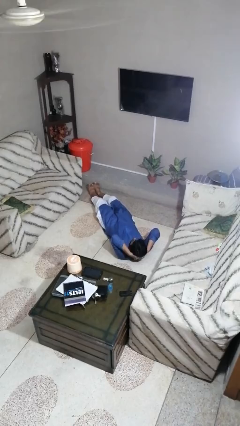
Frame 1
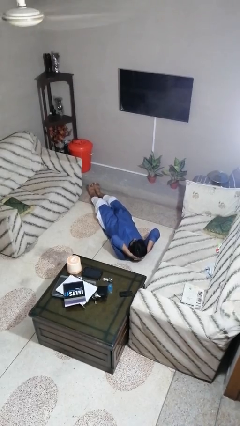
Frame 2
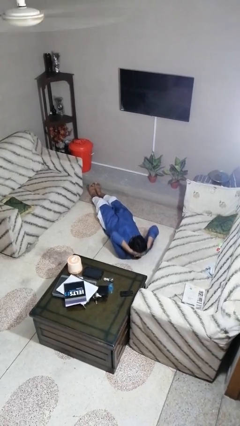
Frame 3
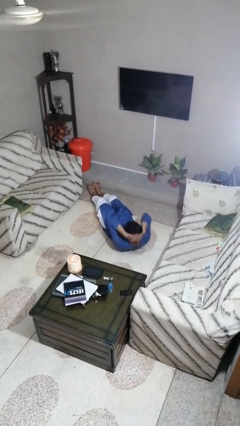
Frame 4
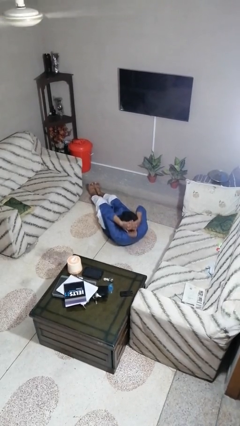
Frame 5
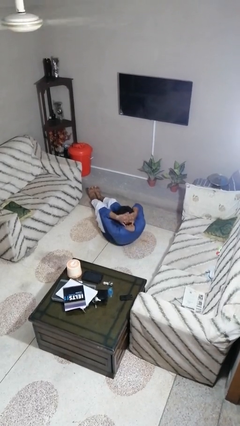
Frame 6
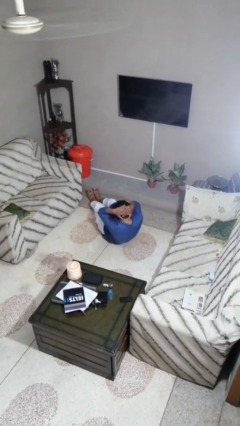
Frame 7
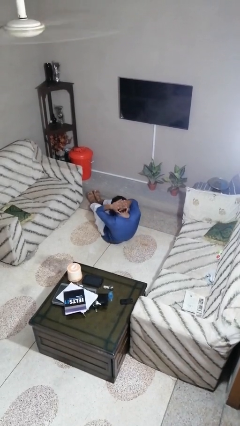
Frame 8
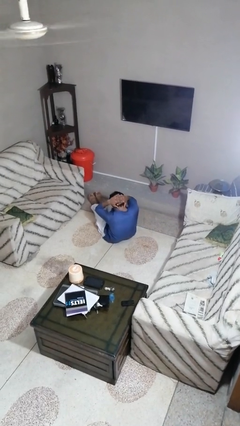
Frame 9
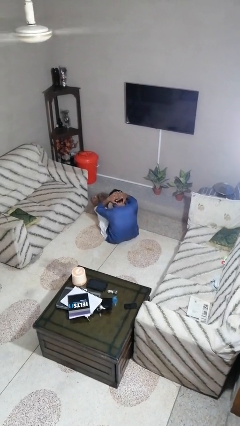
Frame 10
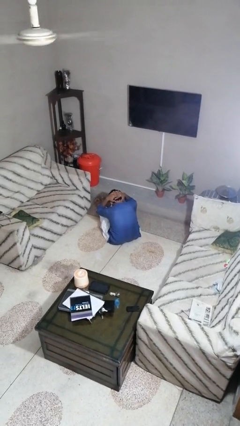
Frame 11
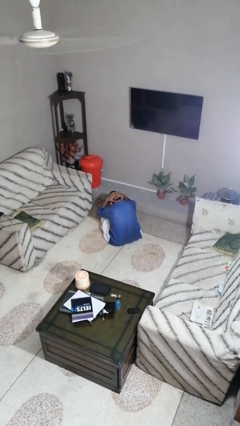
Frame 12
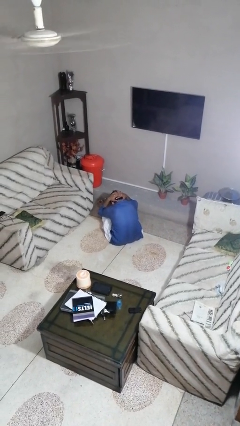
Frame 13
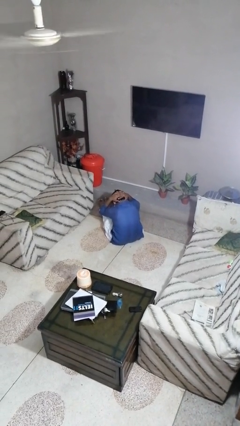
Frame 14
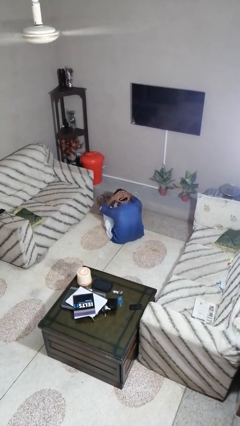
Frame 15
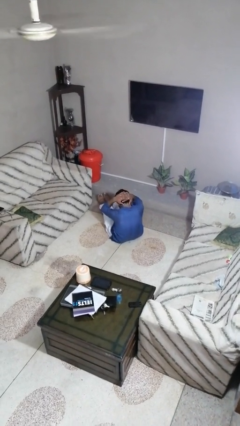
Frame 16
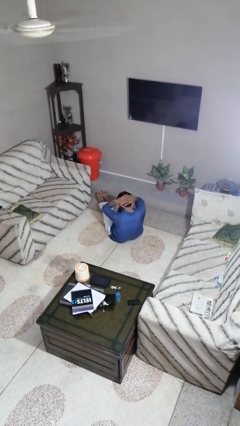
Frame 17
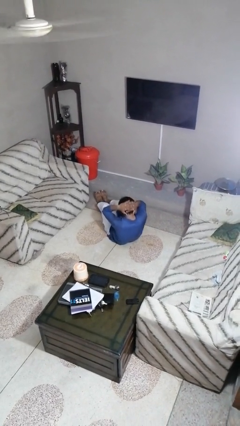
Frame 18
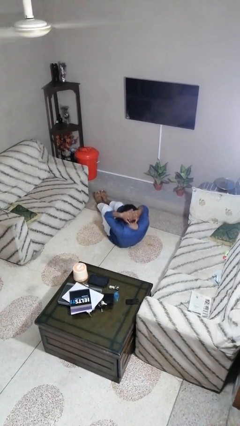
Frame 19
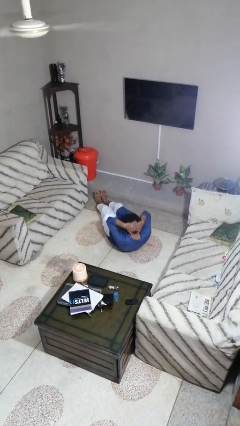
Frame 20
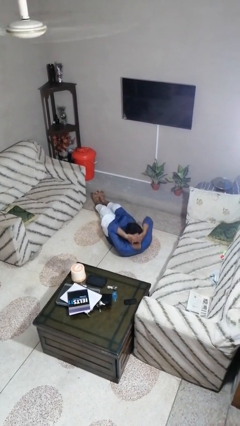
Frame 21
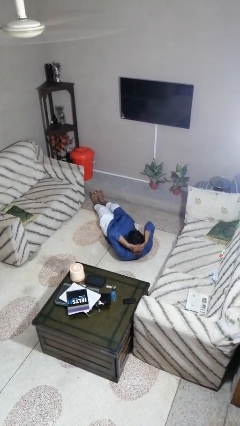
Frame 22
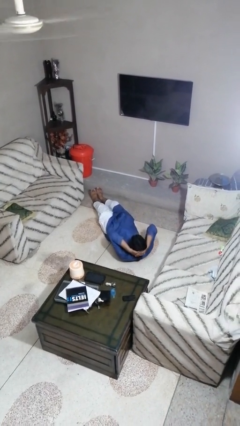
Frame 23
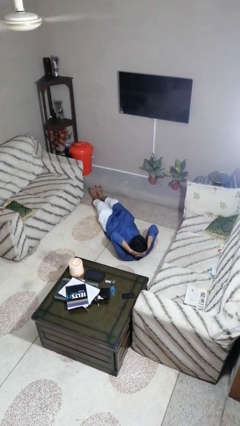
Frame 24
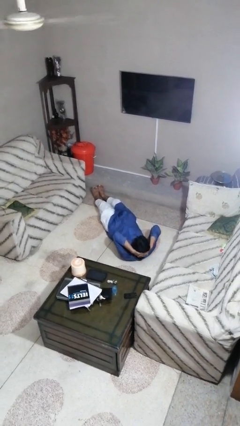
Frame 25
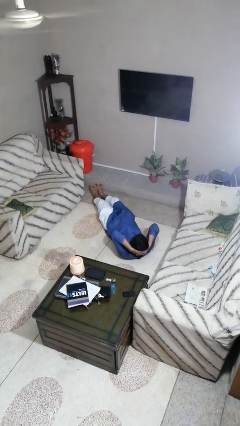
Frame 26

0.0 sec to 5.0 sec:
person exercises with situp

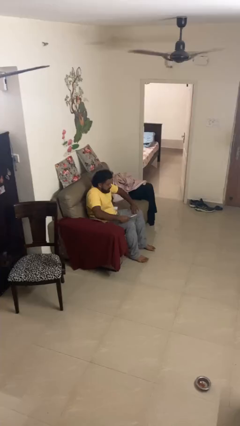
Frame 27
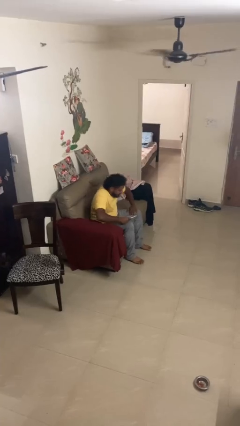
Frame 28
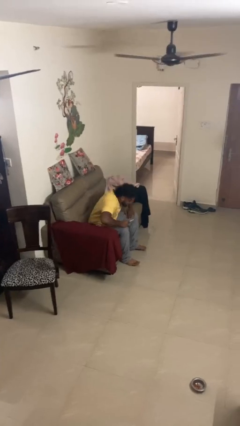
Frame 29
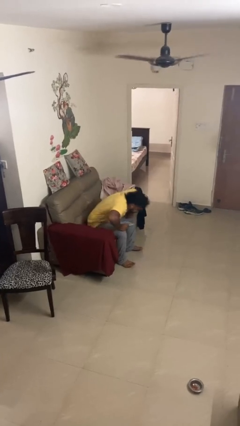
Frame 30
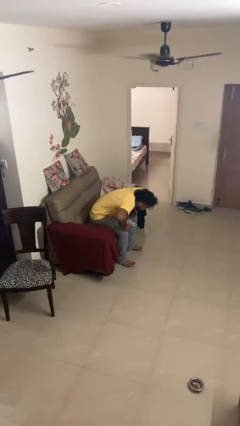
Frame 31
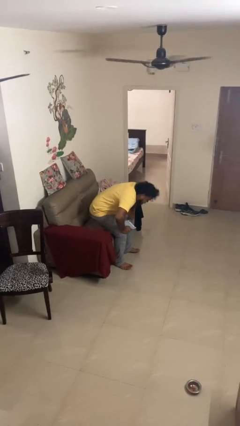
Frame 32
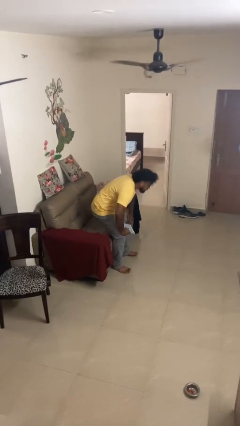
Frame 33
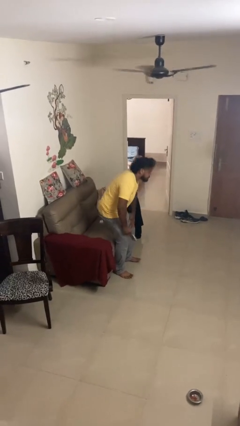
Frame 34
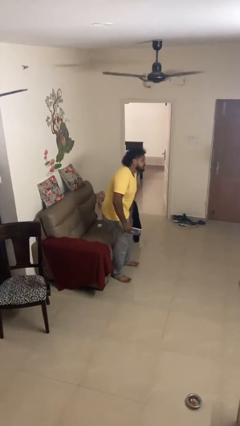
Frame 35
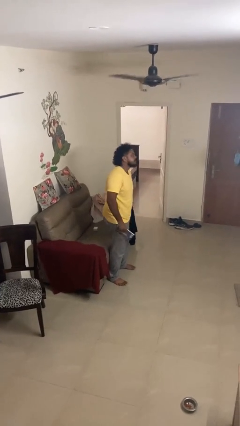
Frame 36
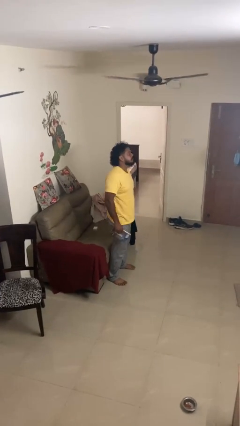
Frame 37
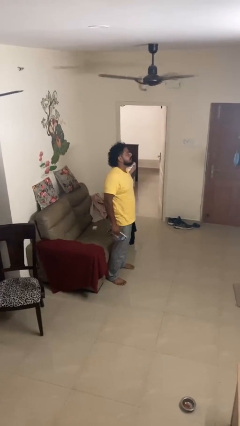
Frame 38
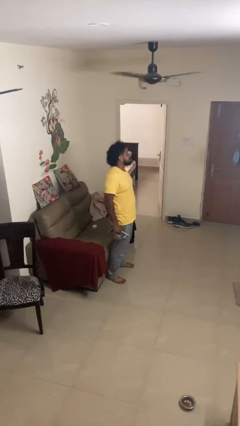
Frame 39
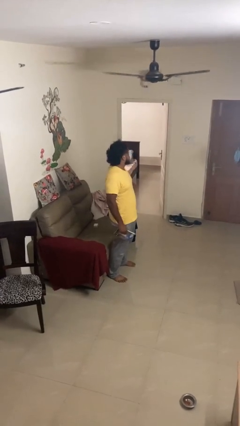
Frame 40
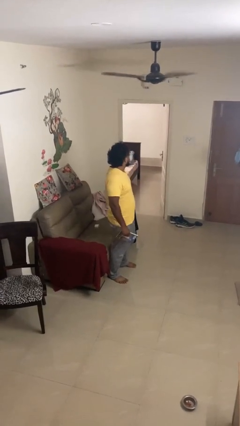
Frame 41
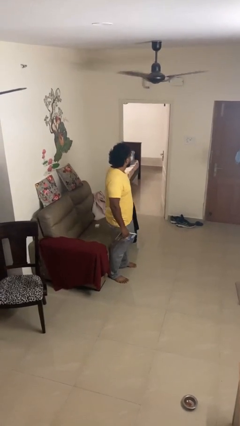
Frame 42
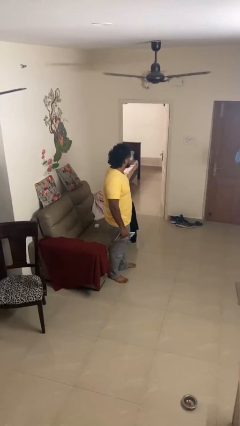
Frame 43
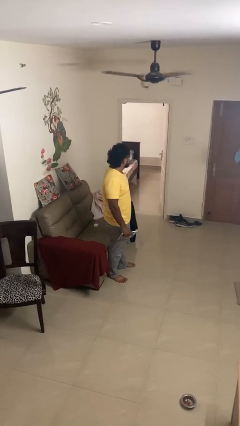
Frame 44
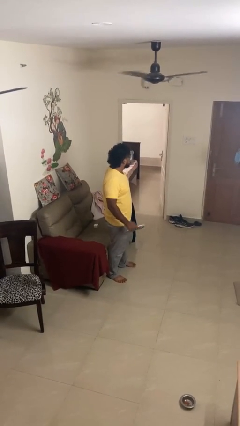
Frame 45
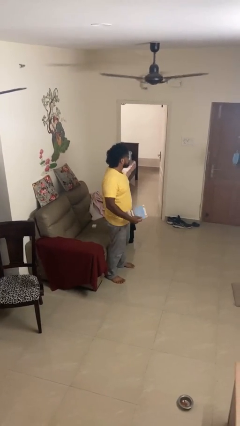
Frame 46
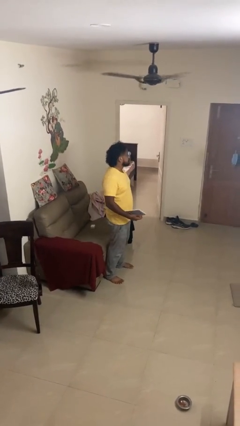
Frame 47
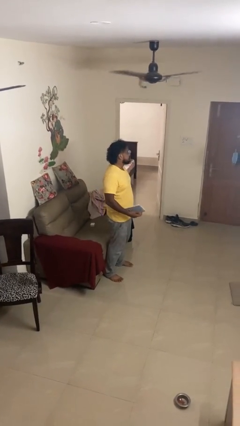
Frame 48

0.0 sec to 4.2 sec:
person stands up

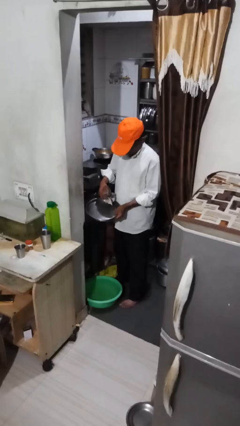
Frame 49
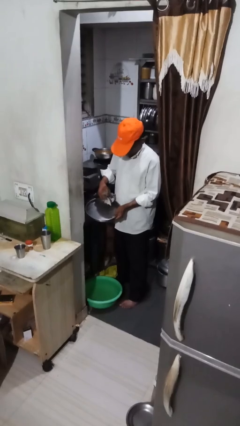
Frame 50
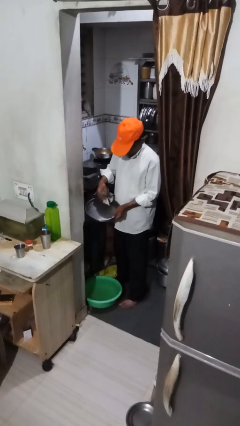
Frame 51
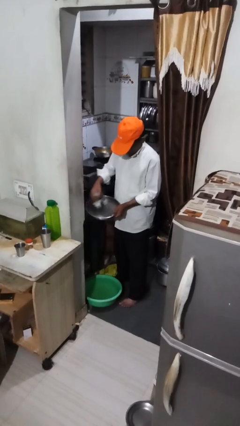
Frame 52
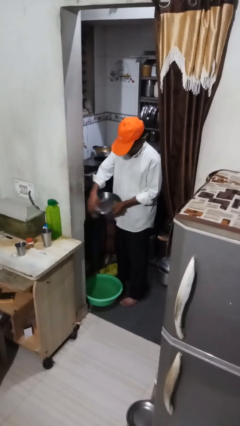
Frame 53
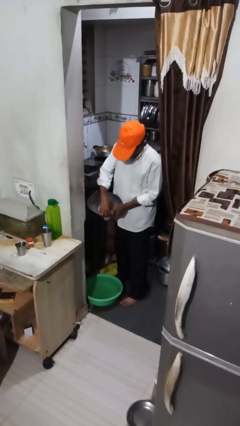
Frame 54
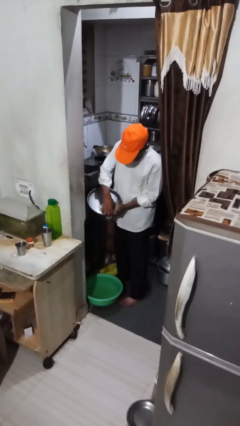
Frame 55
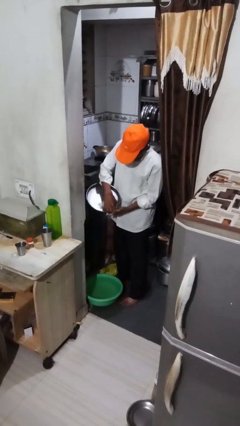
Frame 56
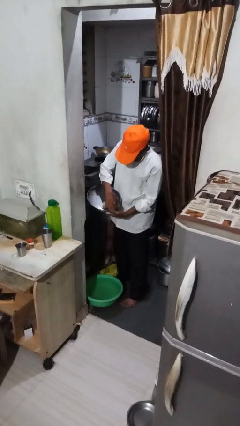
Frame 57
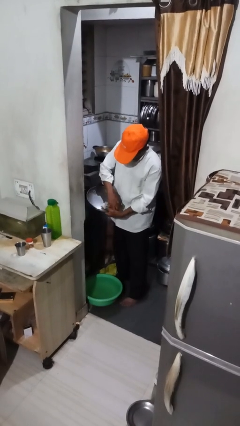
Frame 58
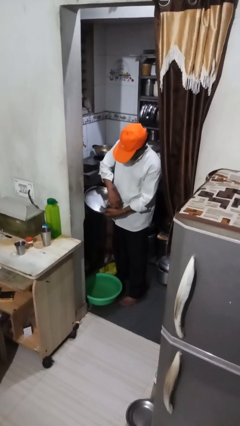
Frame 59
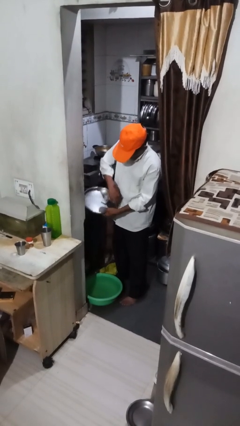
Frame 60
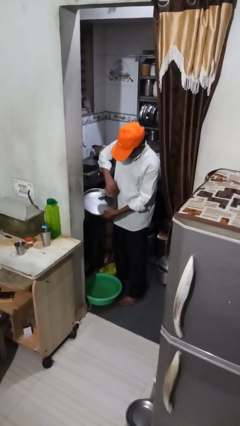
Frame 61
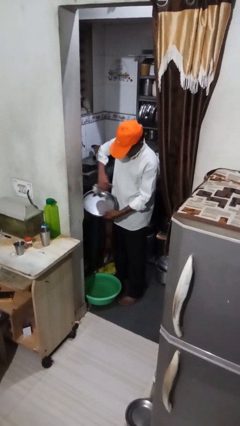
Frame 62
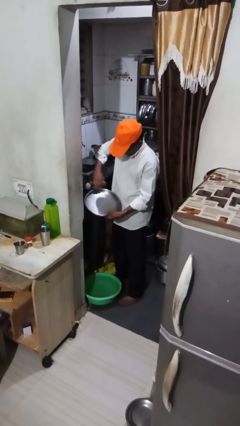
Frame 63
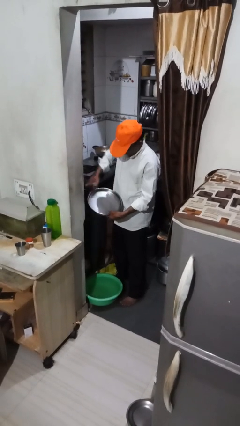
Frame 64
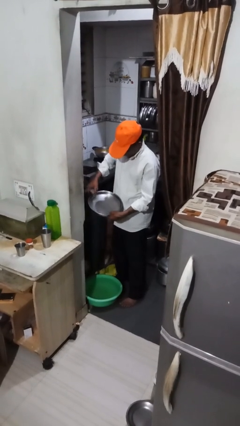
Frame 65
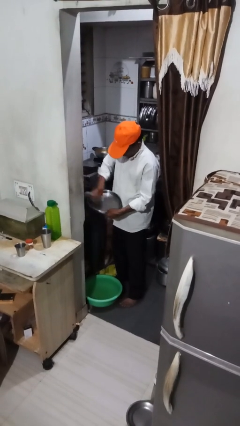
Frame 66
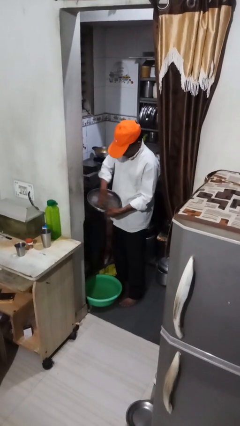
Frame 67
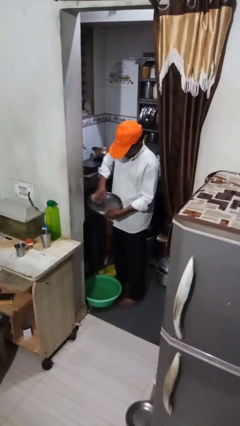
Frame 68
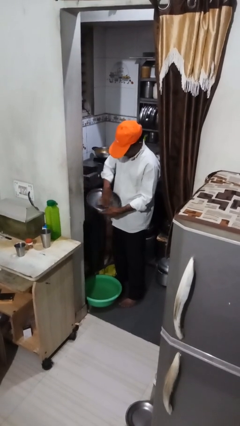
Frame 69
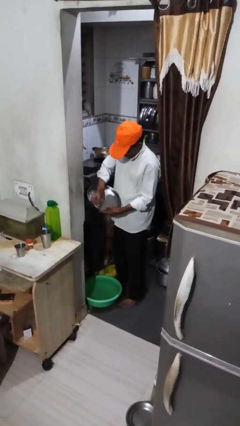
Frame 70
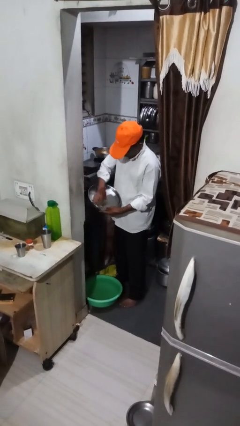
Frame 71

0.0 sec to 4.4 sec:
person dries dish

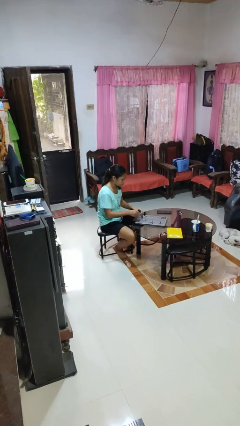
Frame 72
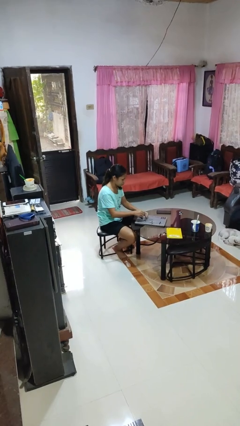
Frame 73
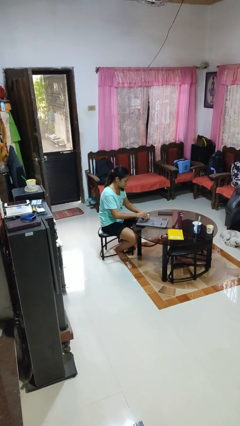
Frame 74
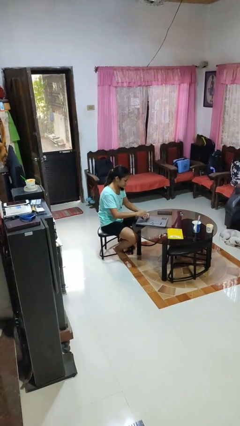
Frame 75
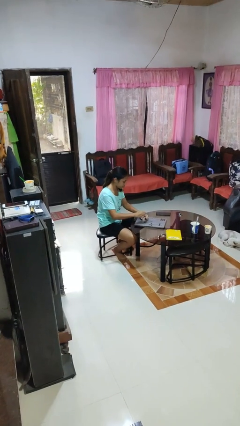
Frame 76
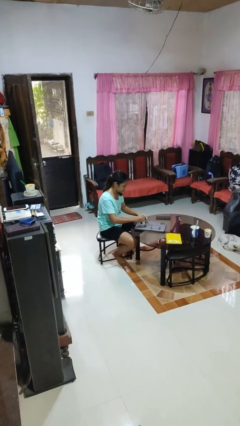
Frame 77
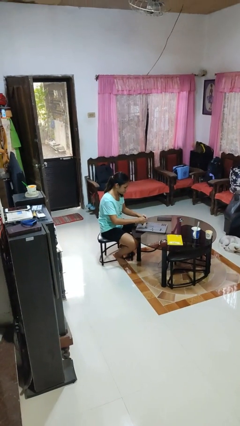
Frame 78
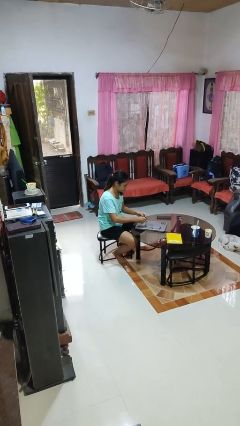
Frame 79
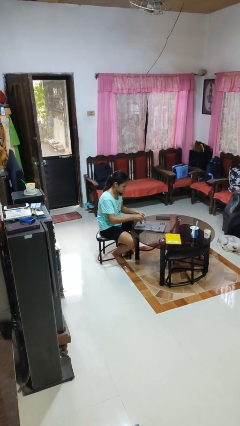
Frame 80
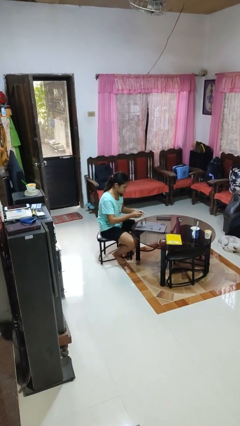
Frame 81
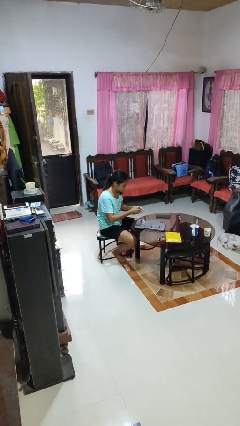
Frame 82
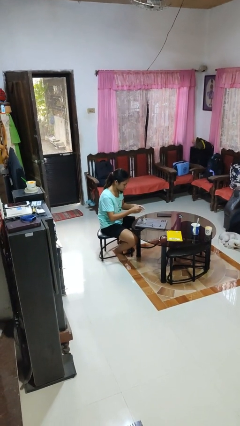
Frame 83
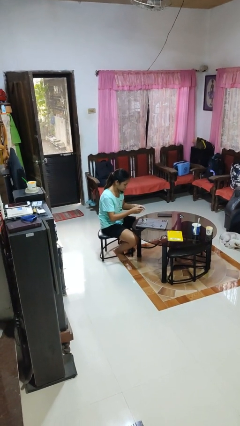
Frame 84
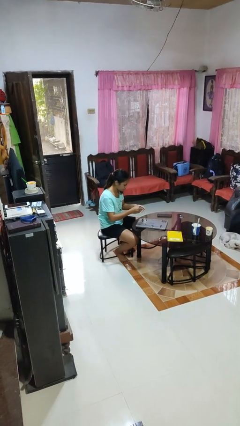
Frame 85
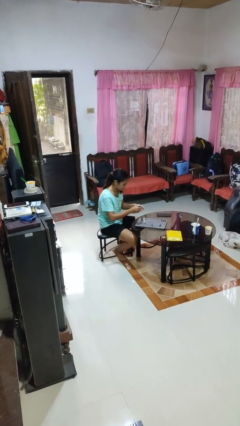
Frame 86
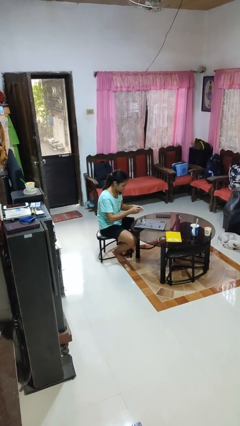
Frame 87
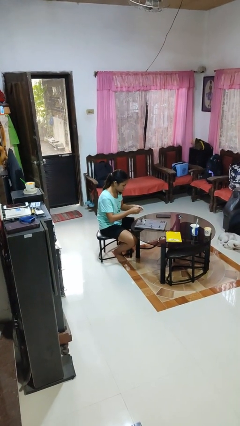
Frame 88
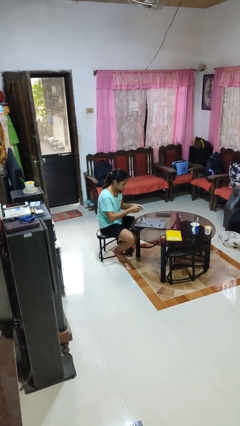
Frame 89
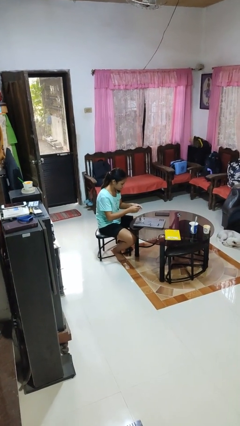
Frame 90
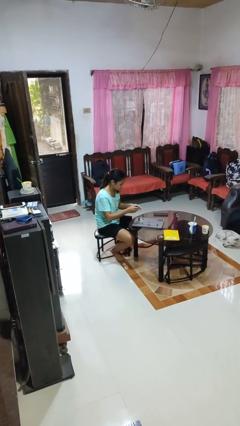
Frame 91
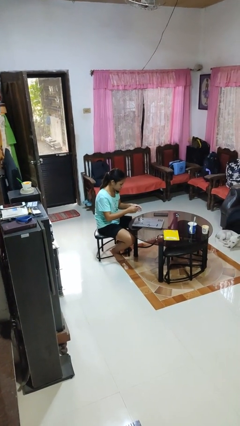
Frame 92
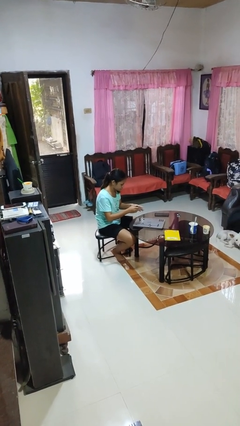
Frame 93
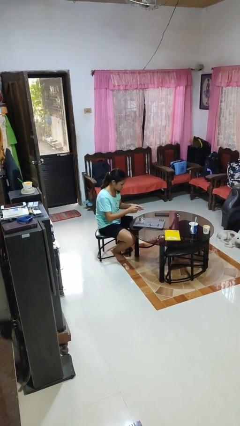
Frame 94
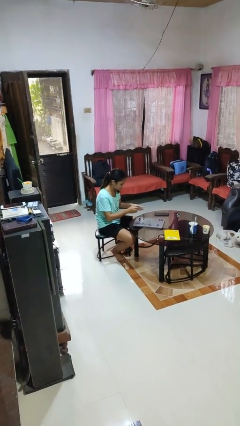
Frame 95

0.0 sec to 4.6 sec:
person paints fingernails
